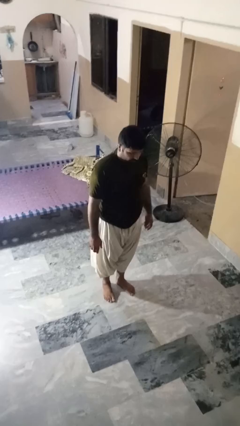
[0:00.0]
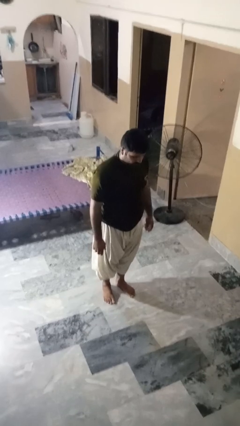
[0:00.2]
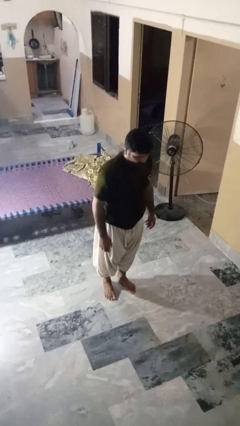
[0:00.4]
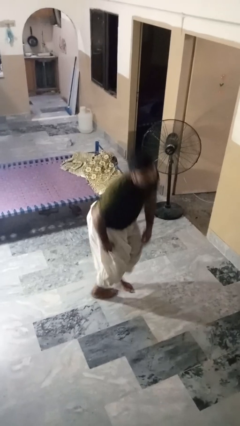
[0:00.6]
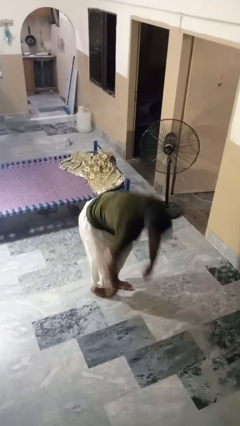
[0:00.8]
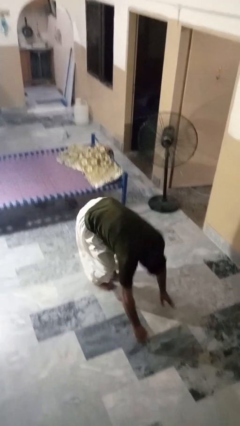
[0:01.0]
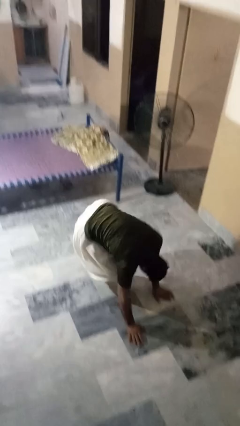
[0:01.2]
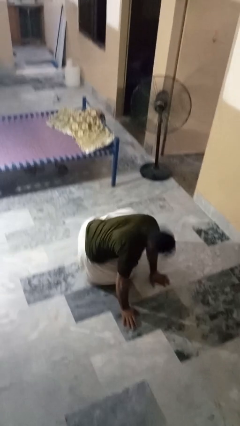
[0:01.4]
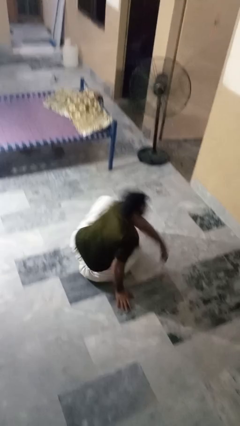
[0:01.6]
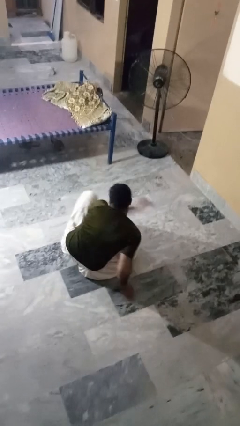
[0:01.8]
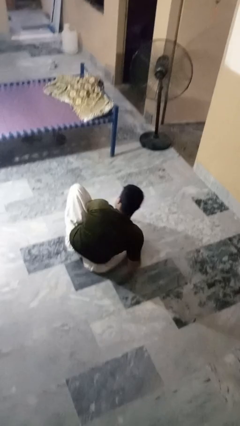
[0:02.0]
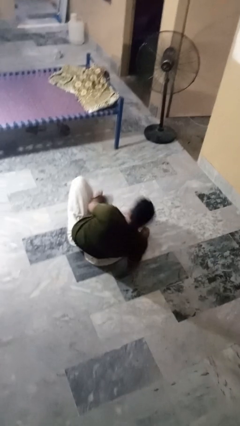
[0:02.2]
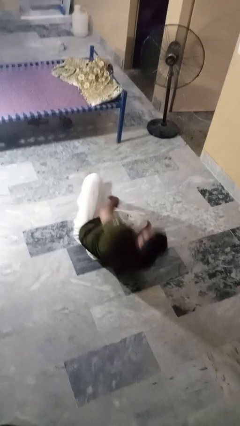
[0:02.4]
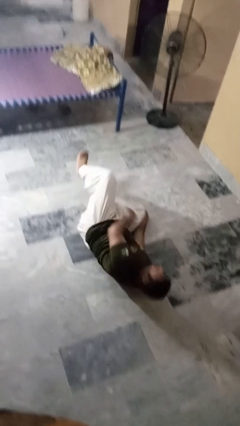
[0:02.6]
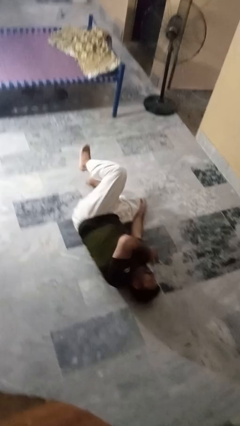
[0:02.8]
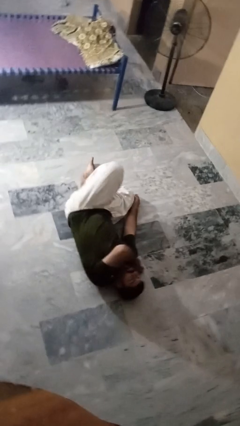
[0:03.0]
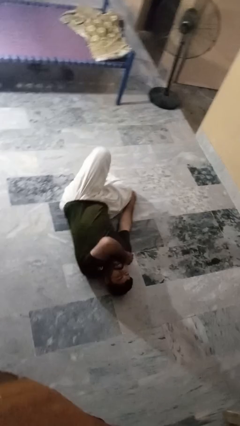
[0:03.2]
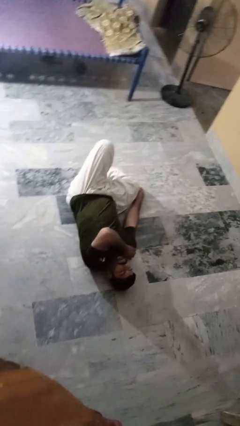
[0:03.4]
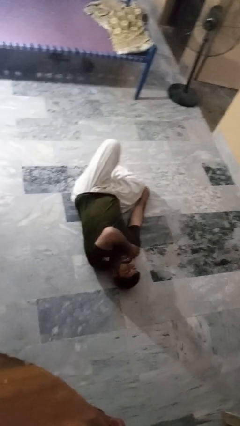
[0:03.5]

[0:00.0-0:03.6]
person falls while standing

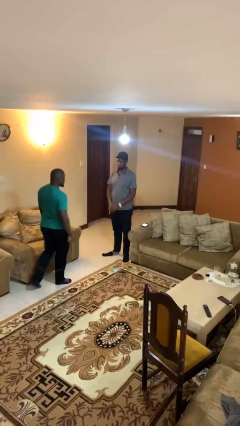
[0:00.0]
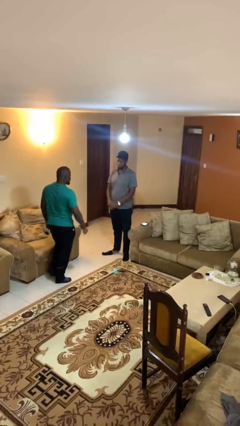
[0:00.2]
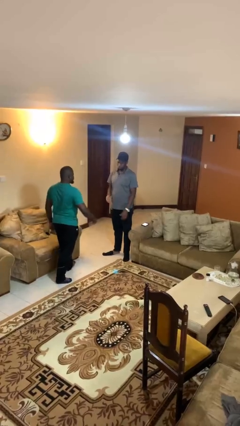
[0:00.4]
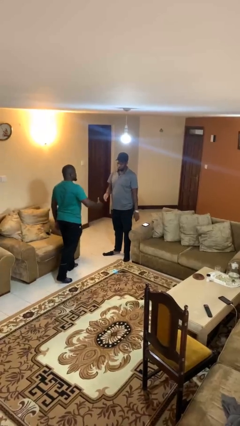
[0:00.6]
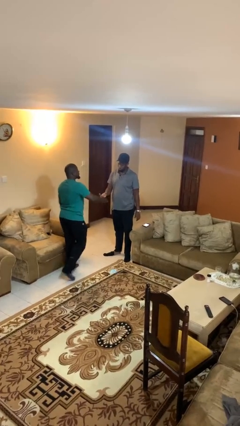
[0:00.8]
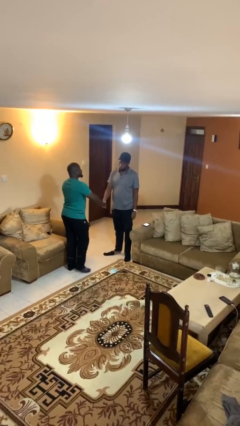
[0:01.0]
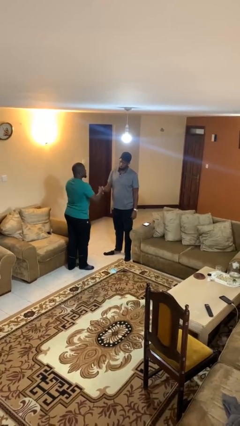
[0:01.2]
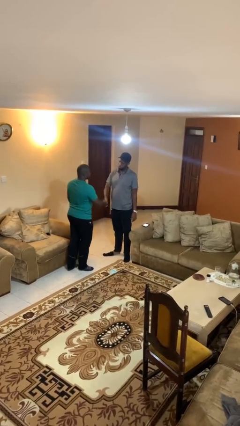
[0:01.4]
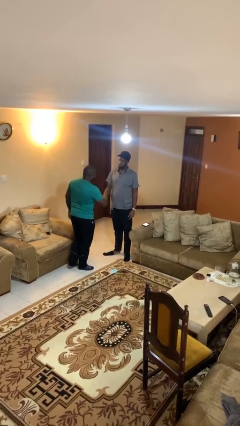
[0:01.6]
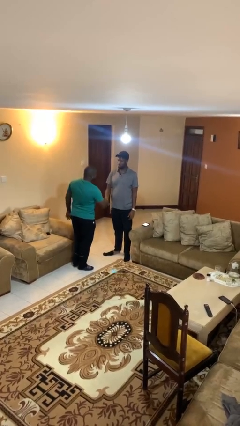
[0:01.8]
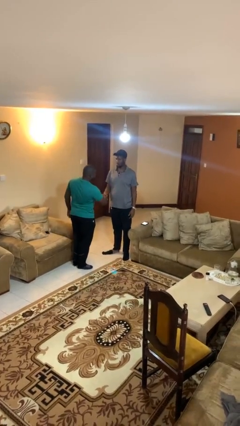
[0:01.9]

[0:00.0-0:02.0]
person shakes hand

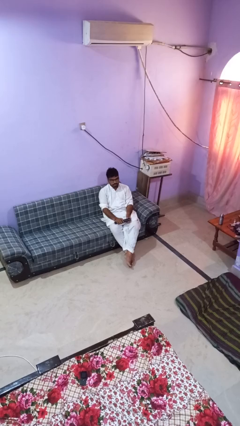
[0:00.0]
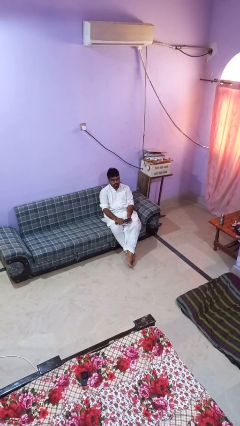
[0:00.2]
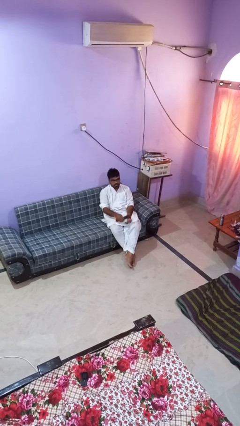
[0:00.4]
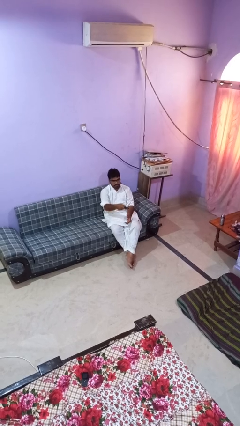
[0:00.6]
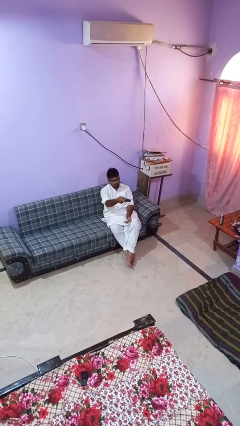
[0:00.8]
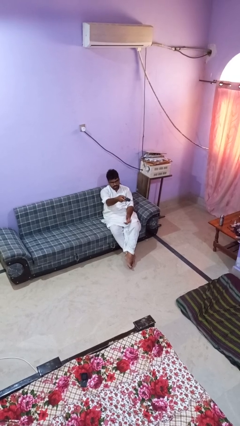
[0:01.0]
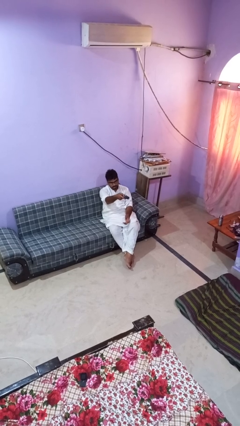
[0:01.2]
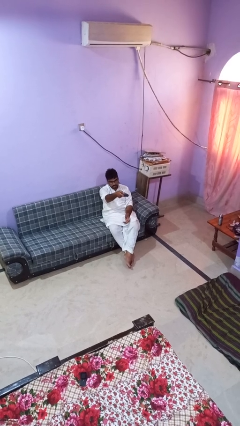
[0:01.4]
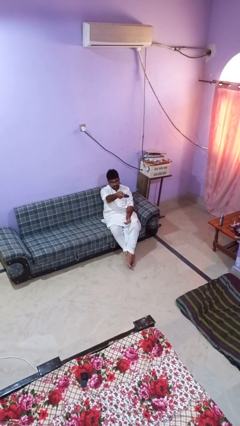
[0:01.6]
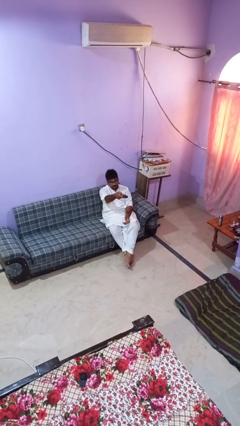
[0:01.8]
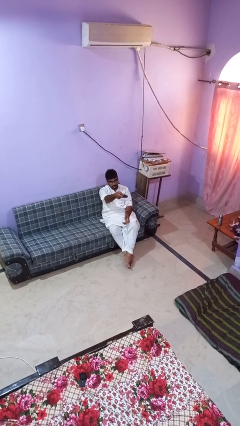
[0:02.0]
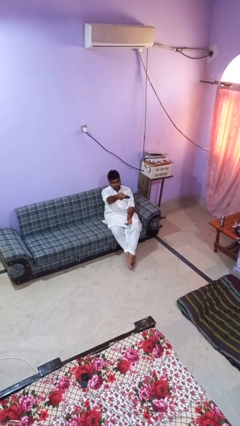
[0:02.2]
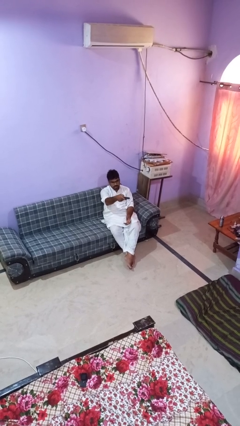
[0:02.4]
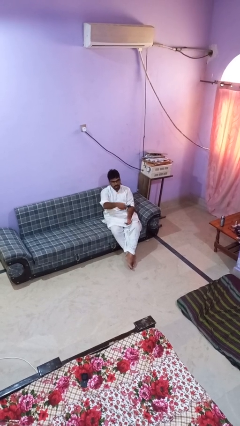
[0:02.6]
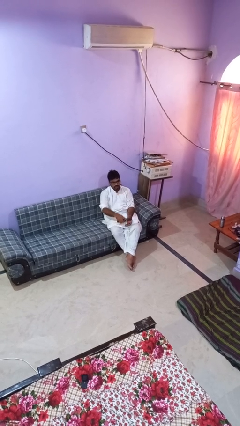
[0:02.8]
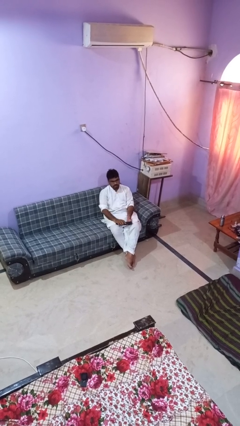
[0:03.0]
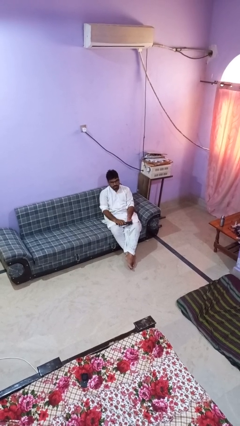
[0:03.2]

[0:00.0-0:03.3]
person uses television remote

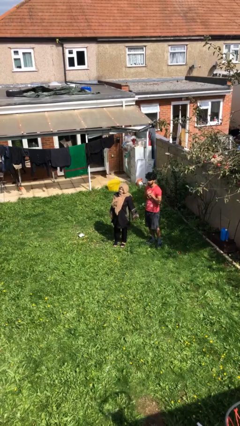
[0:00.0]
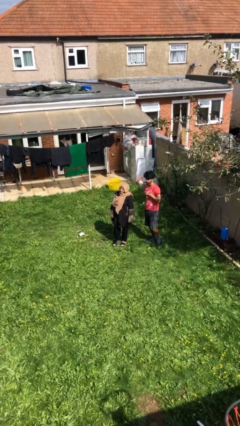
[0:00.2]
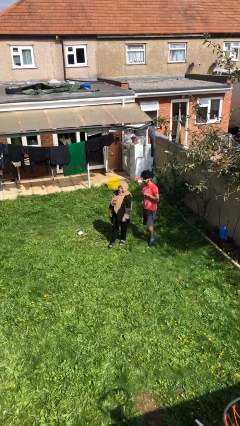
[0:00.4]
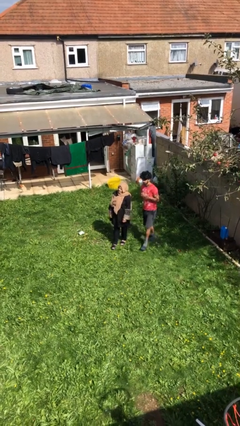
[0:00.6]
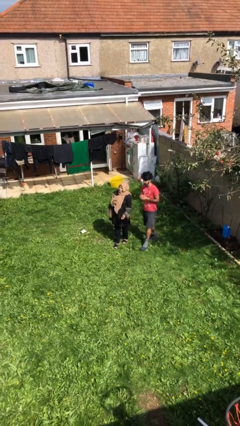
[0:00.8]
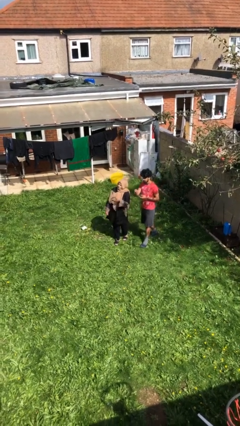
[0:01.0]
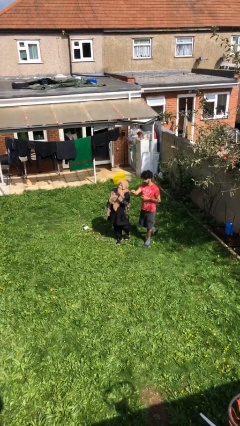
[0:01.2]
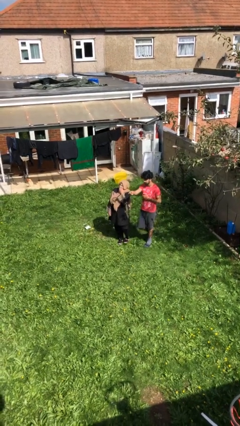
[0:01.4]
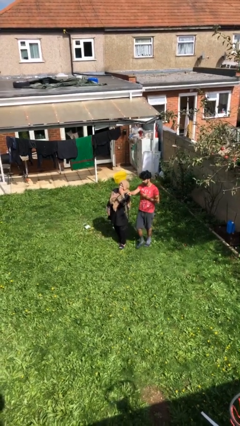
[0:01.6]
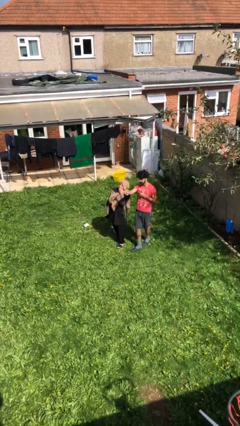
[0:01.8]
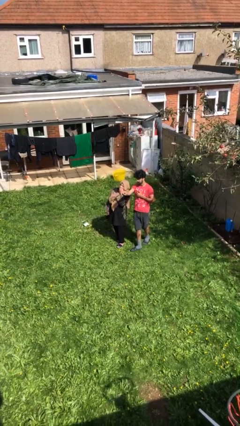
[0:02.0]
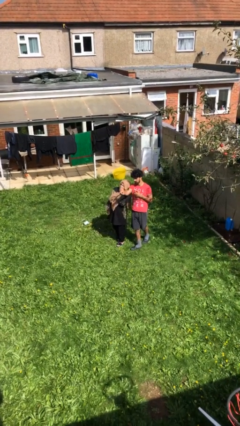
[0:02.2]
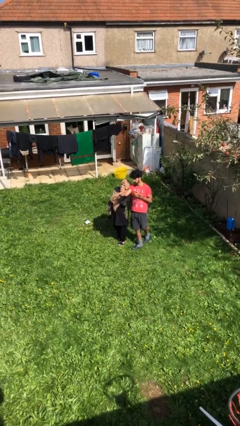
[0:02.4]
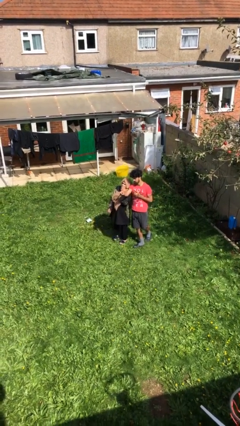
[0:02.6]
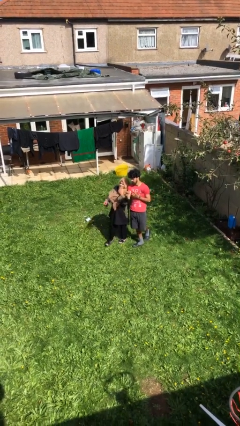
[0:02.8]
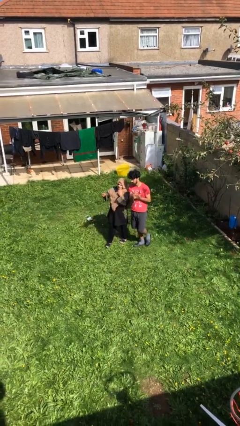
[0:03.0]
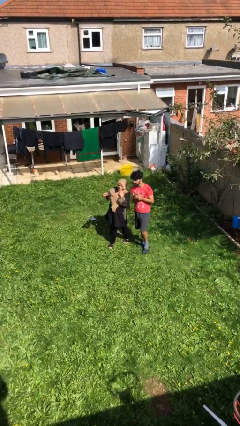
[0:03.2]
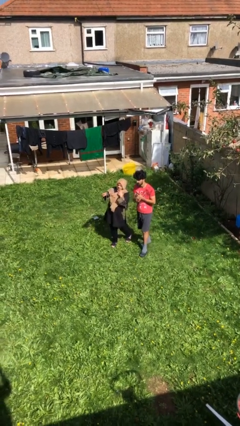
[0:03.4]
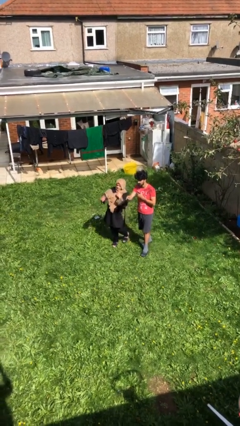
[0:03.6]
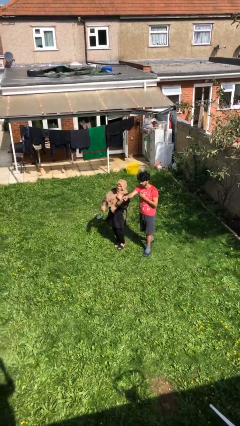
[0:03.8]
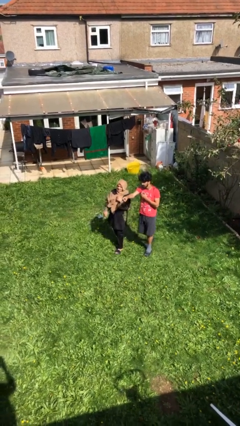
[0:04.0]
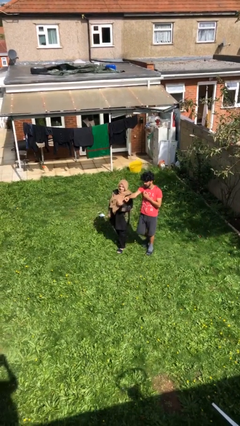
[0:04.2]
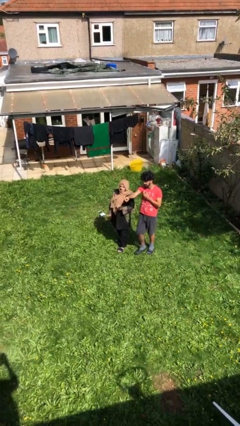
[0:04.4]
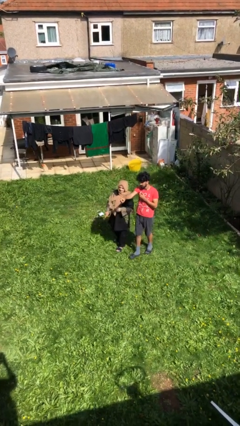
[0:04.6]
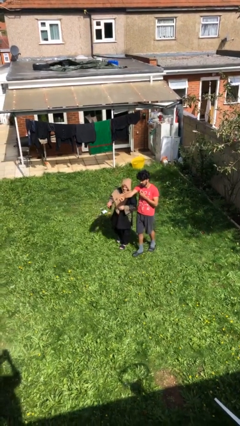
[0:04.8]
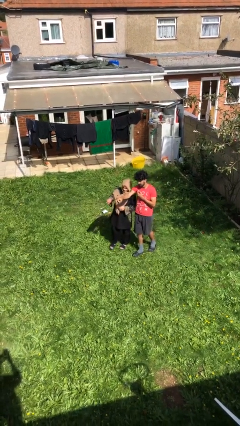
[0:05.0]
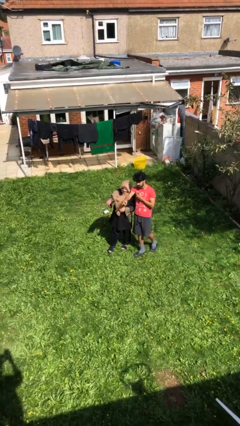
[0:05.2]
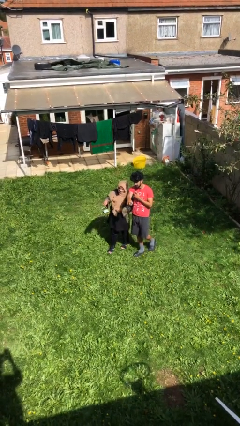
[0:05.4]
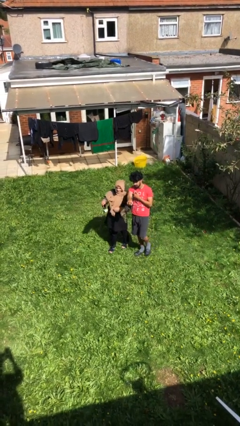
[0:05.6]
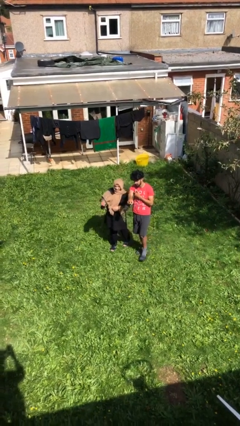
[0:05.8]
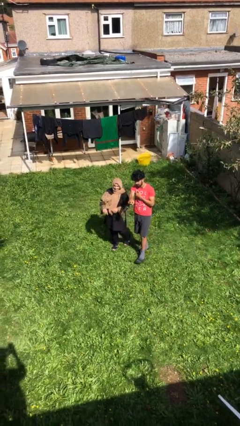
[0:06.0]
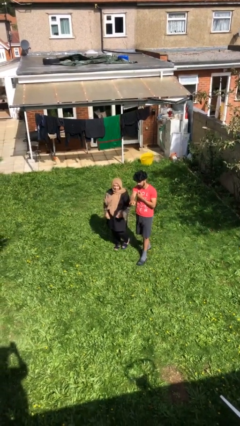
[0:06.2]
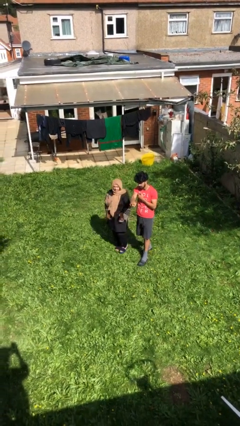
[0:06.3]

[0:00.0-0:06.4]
person talks to person

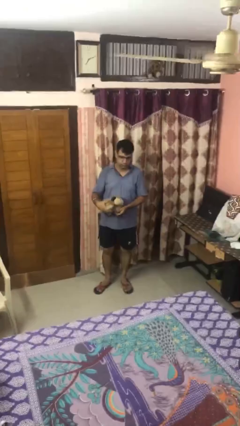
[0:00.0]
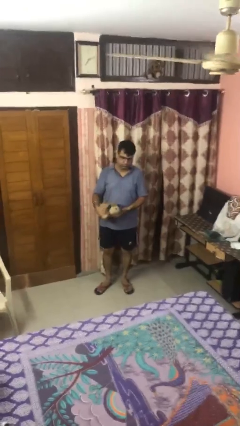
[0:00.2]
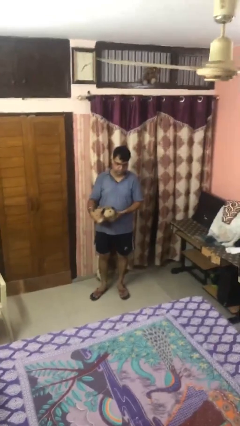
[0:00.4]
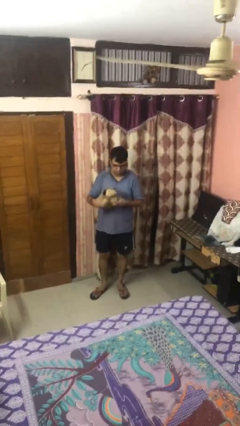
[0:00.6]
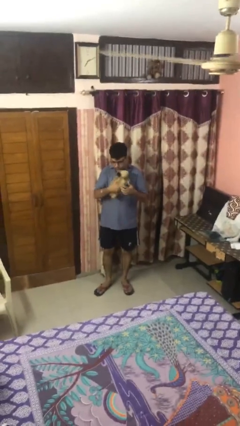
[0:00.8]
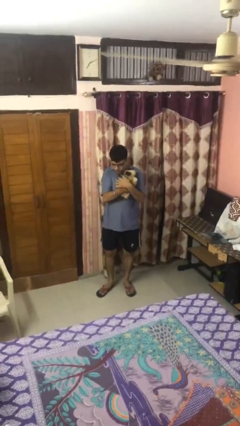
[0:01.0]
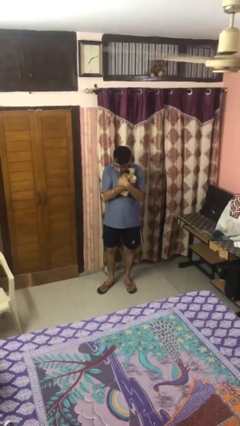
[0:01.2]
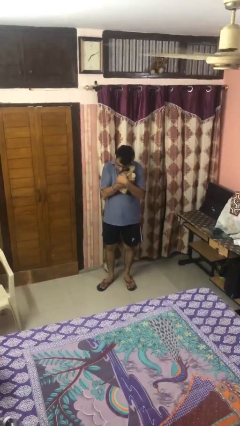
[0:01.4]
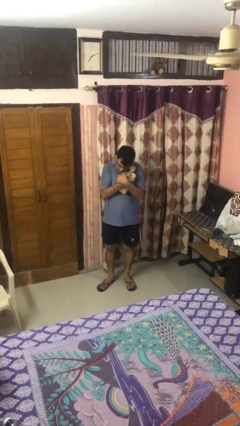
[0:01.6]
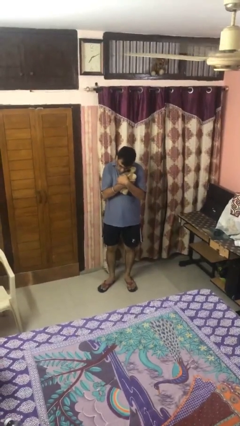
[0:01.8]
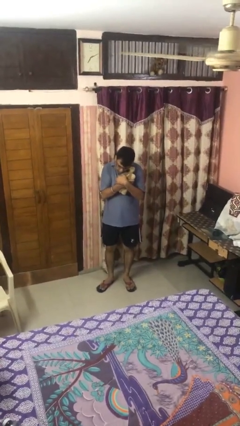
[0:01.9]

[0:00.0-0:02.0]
person hugs stuffed animal

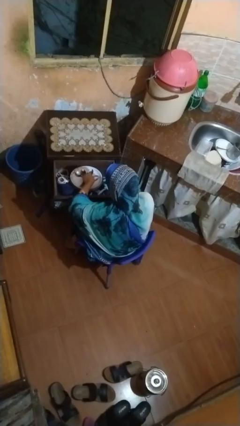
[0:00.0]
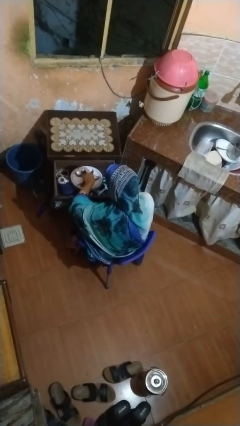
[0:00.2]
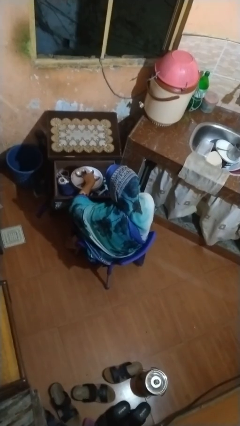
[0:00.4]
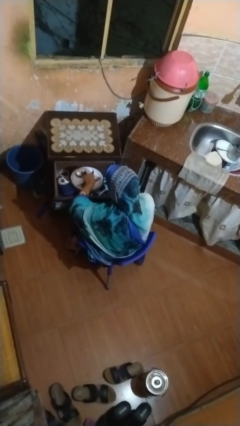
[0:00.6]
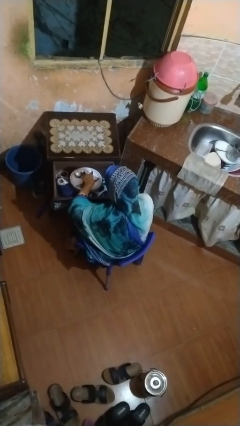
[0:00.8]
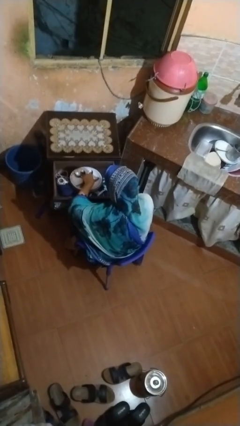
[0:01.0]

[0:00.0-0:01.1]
person puts object into kitchen drawer
